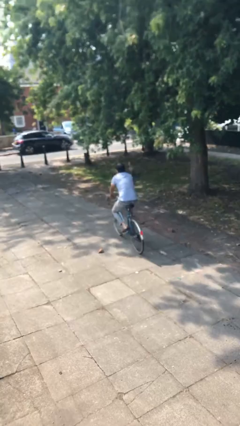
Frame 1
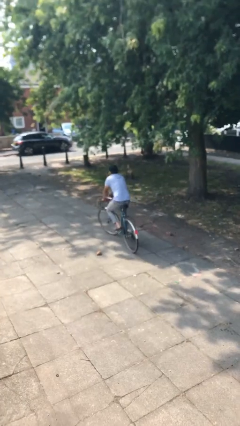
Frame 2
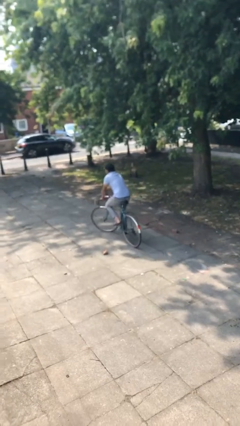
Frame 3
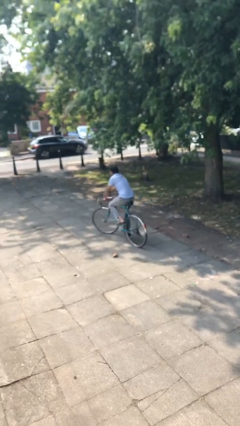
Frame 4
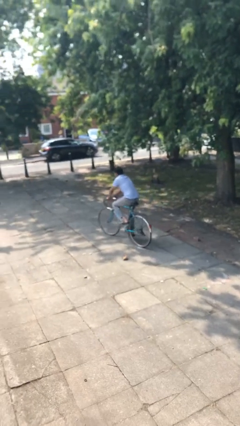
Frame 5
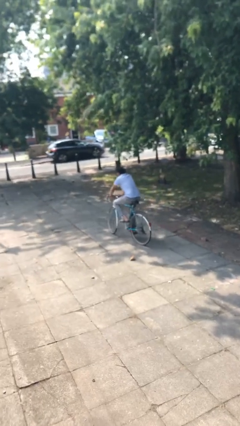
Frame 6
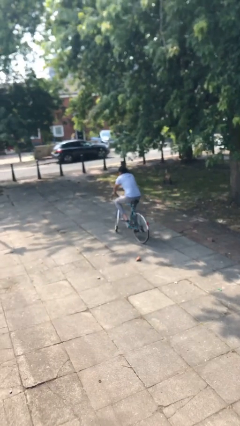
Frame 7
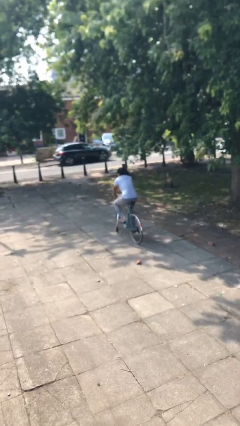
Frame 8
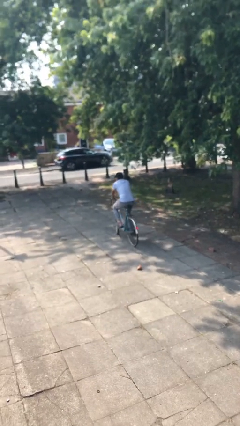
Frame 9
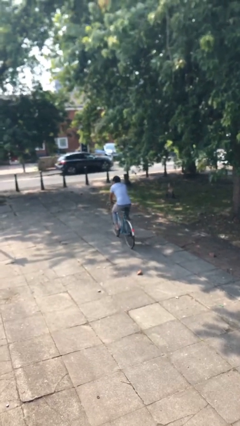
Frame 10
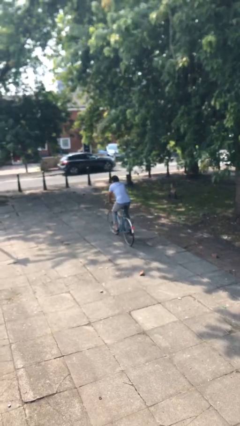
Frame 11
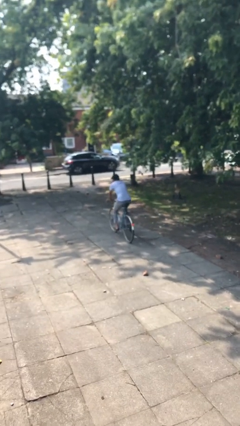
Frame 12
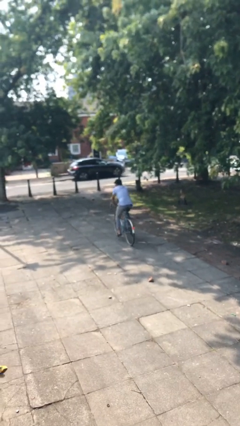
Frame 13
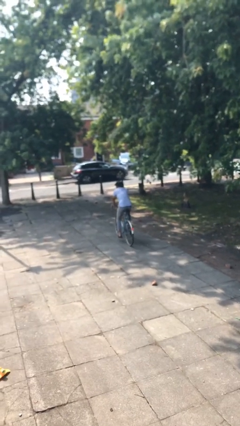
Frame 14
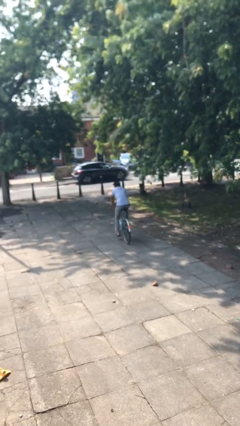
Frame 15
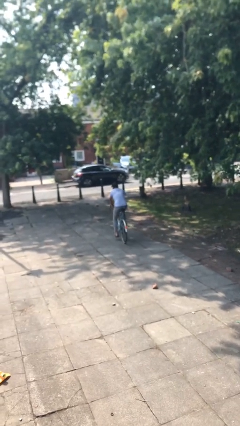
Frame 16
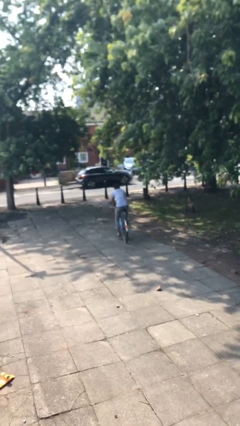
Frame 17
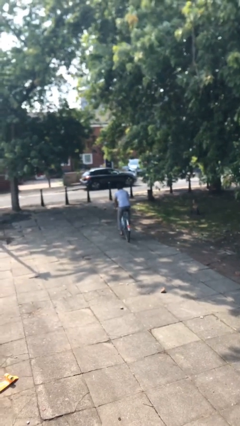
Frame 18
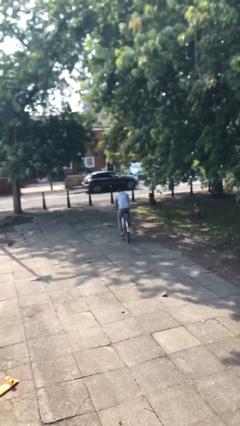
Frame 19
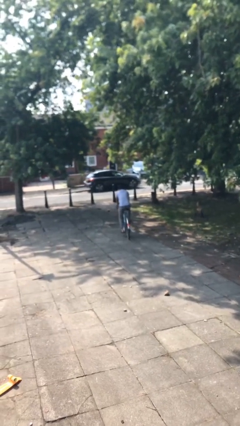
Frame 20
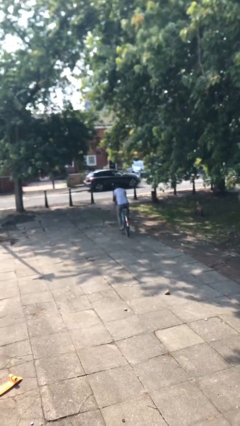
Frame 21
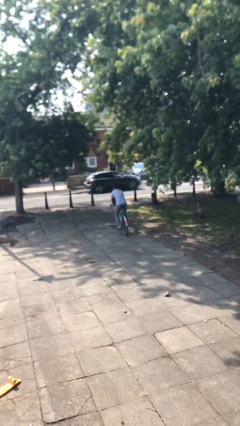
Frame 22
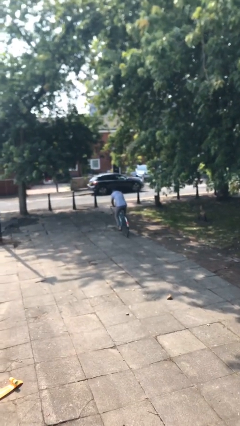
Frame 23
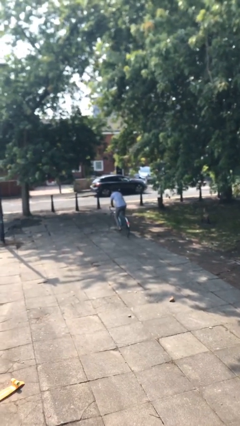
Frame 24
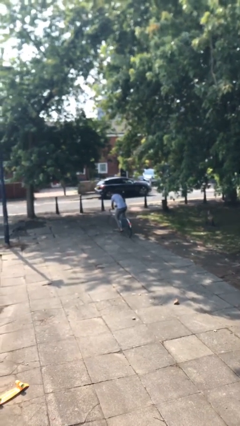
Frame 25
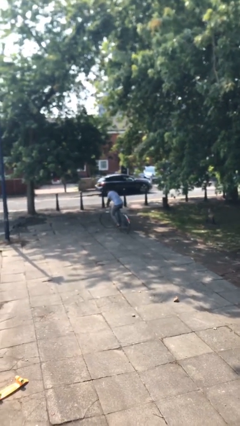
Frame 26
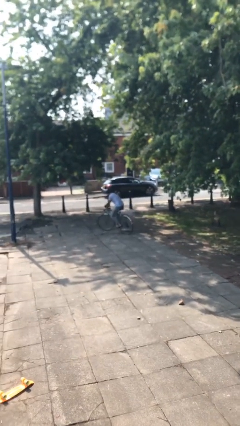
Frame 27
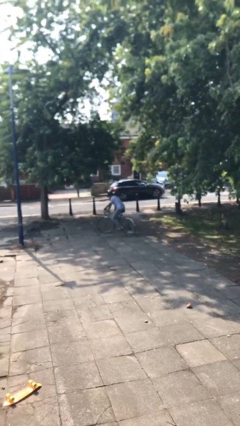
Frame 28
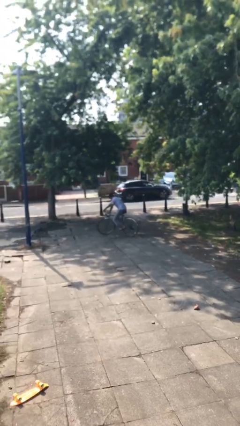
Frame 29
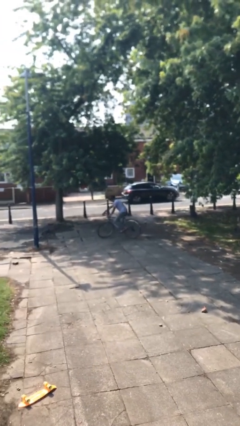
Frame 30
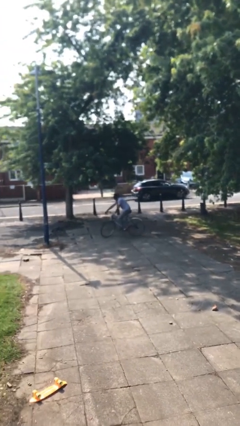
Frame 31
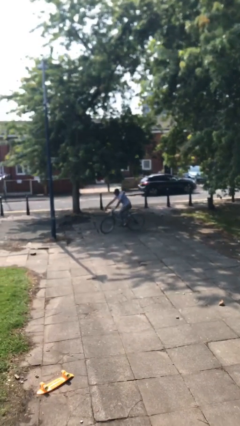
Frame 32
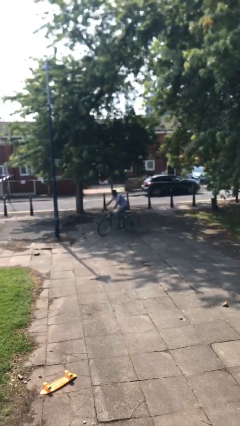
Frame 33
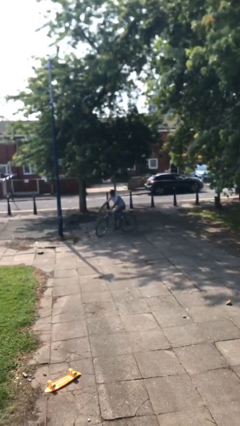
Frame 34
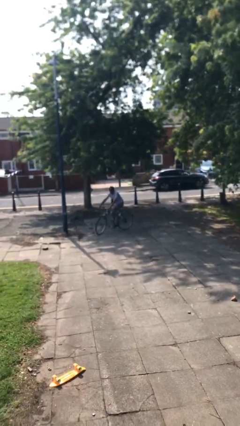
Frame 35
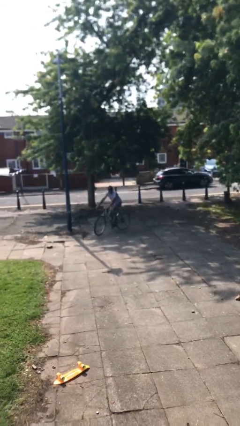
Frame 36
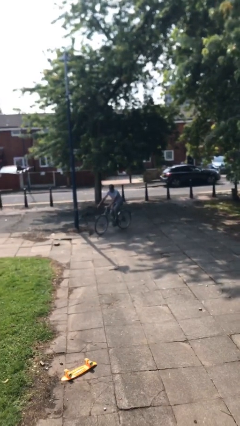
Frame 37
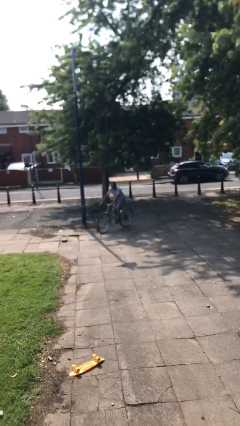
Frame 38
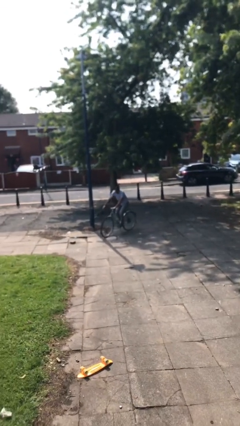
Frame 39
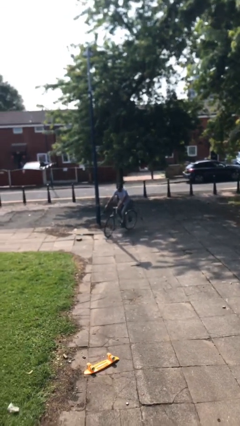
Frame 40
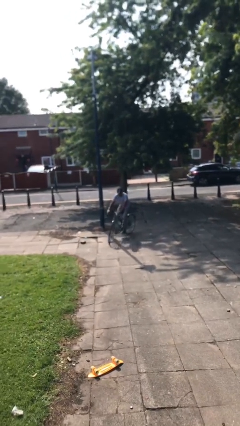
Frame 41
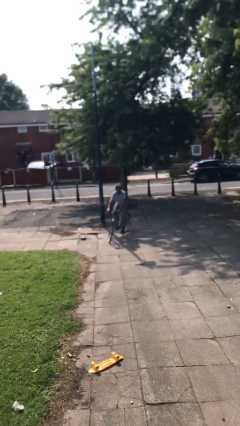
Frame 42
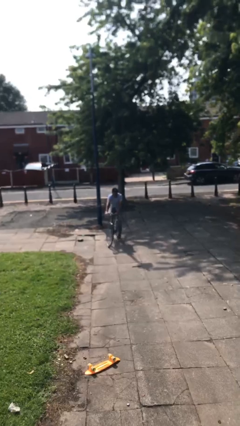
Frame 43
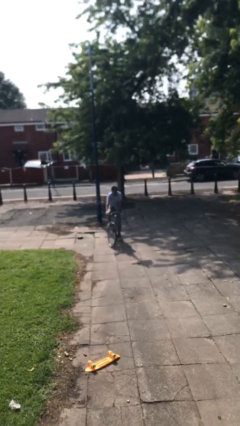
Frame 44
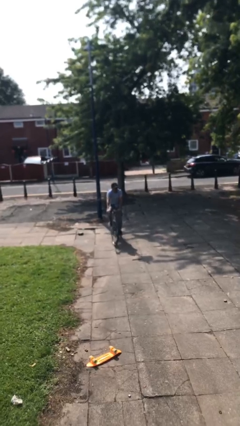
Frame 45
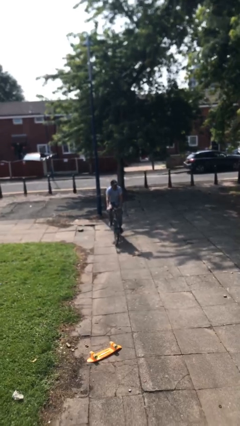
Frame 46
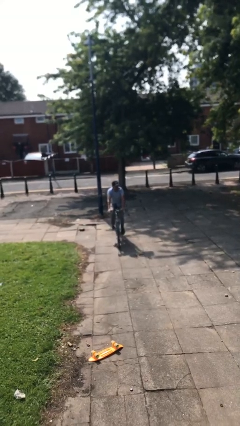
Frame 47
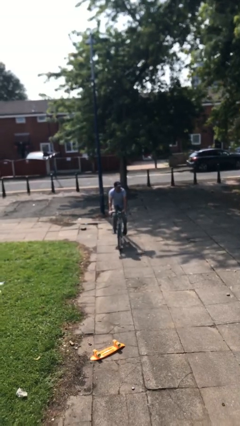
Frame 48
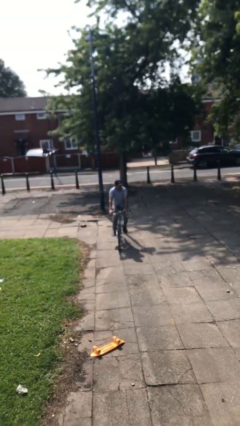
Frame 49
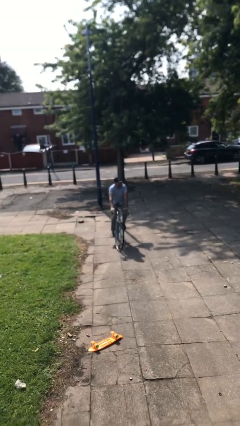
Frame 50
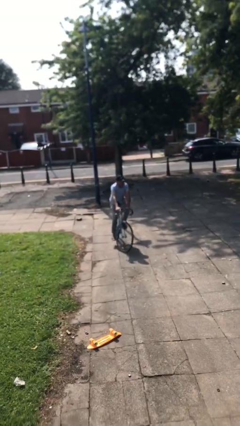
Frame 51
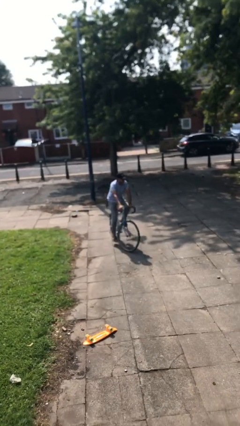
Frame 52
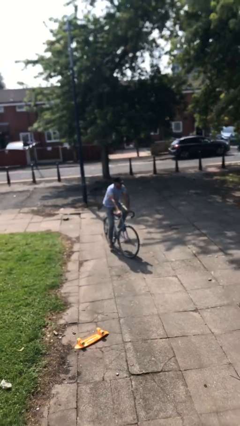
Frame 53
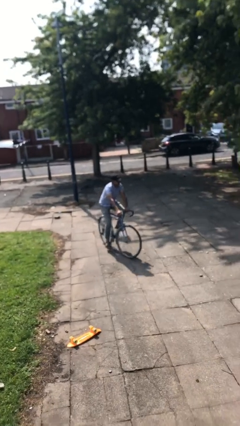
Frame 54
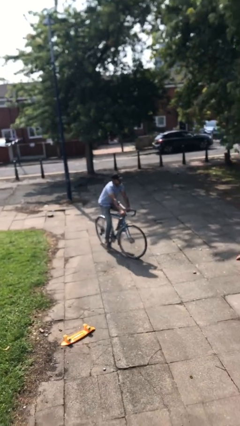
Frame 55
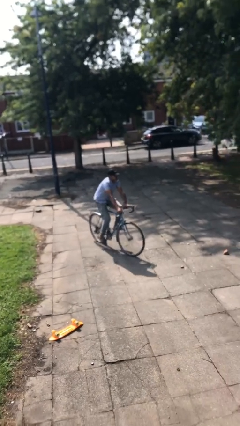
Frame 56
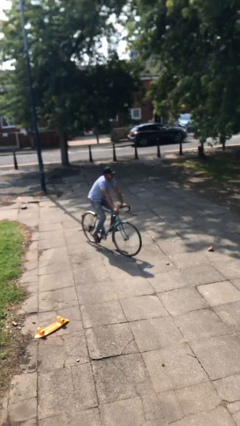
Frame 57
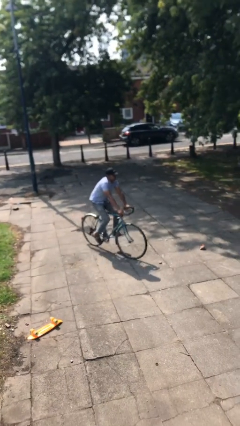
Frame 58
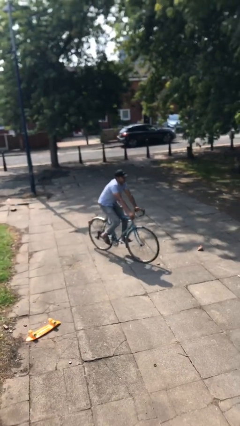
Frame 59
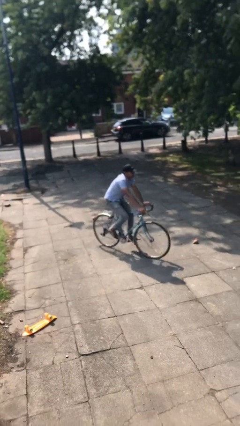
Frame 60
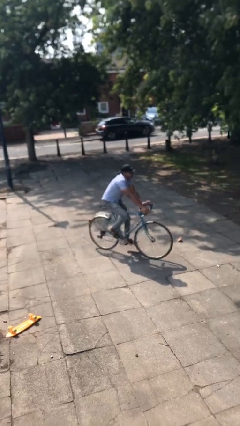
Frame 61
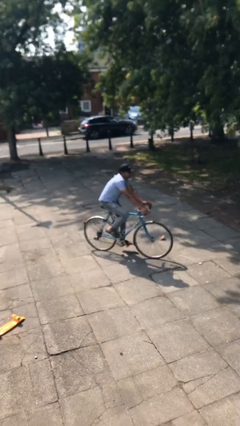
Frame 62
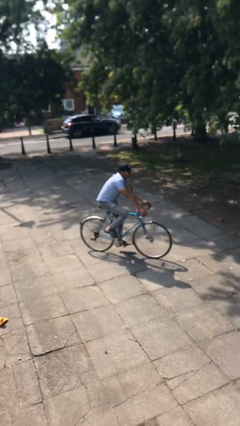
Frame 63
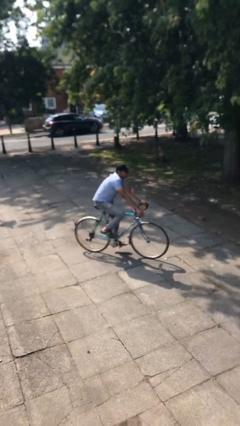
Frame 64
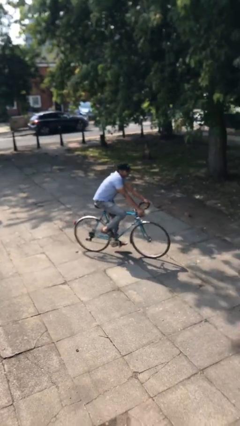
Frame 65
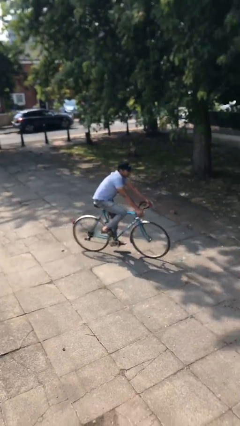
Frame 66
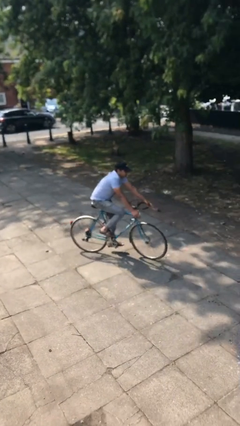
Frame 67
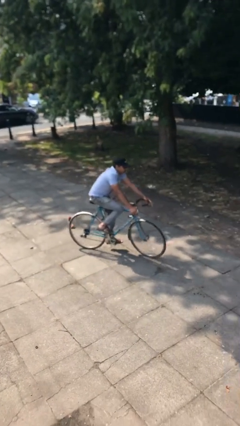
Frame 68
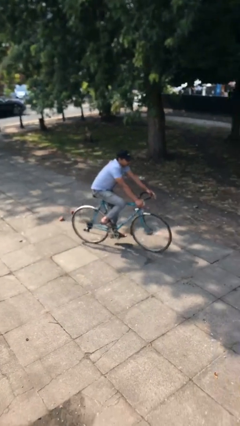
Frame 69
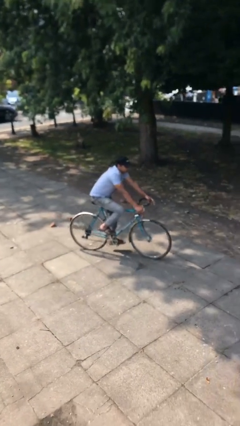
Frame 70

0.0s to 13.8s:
person rides bicycle

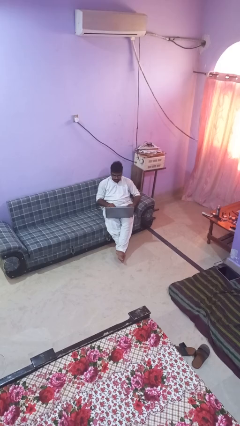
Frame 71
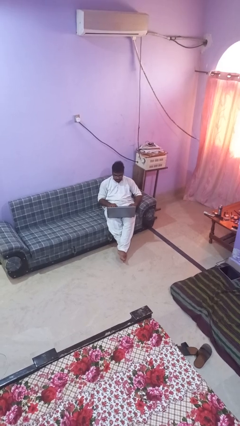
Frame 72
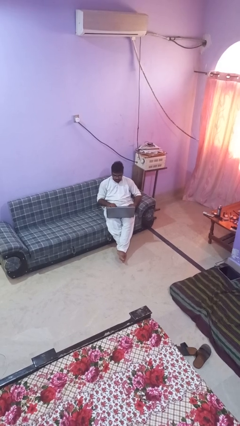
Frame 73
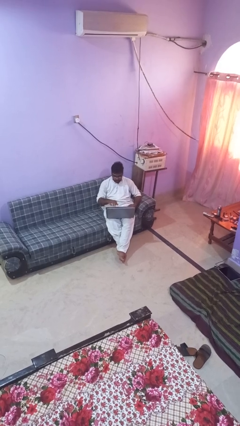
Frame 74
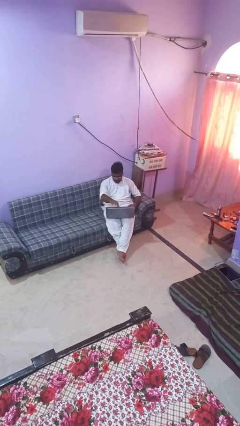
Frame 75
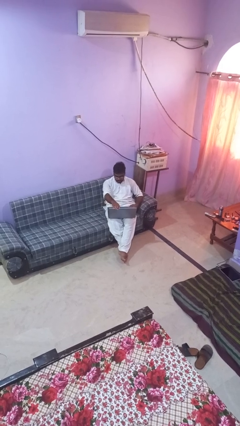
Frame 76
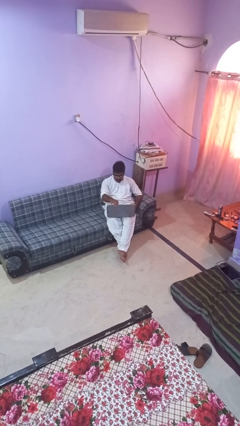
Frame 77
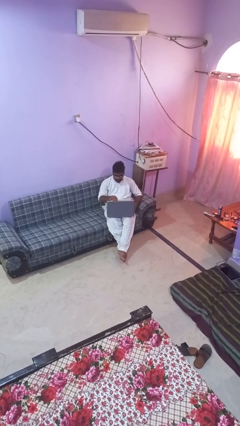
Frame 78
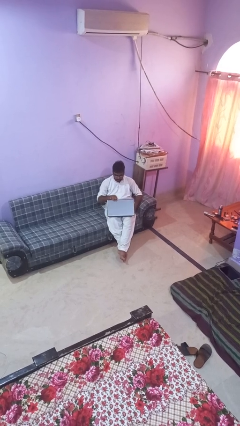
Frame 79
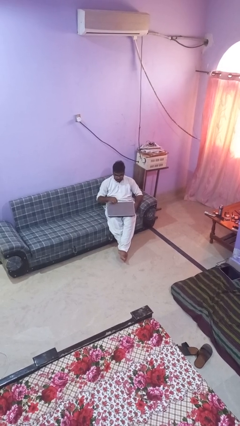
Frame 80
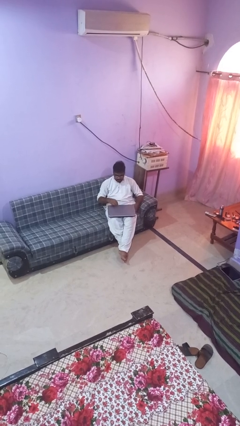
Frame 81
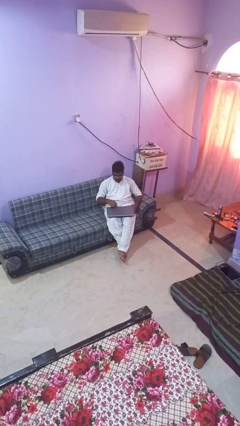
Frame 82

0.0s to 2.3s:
person closes laptop

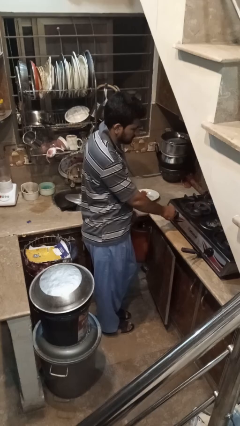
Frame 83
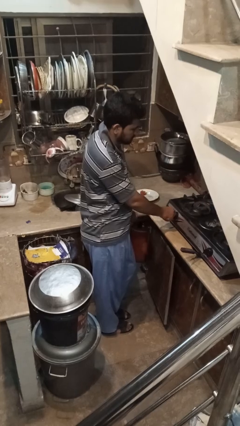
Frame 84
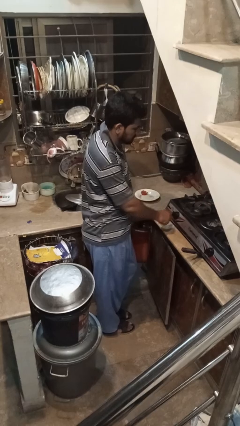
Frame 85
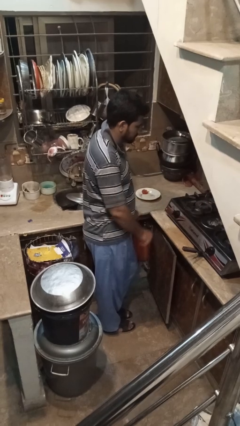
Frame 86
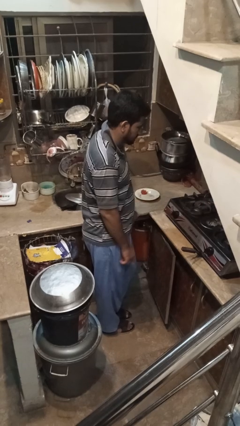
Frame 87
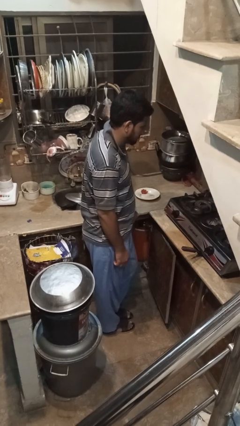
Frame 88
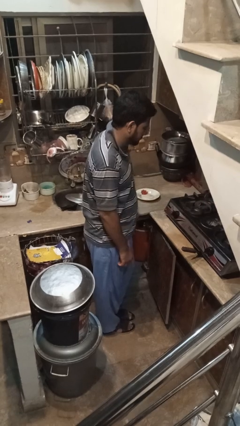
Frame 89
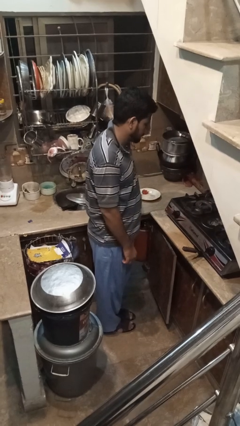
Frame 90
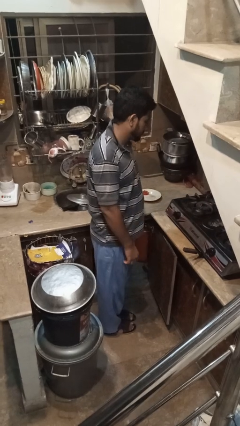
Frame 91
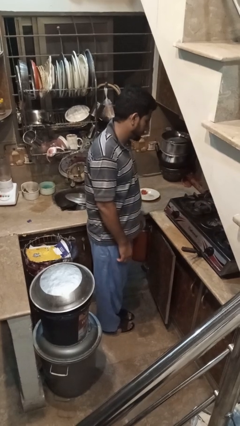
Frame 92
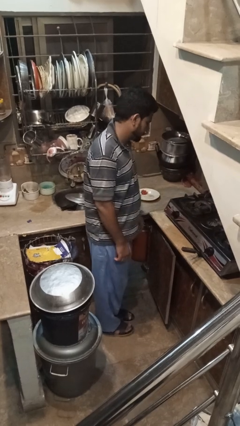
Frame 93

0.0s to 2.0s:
person turns off stovetop
